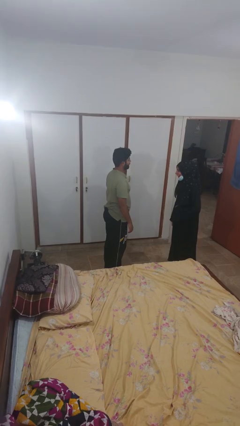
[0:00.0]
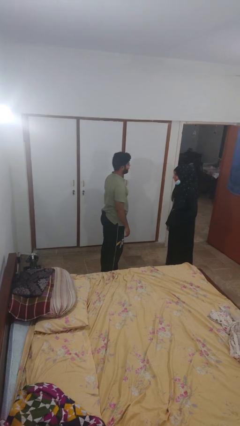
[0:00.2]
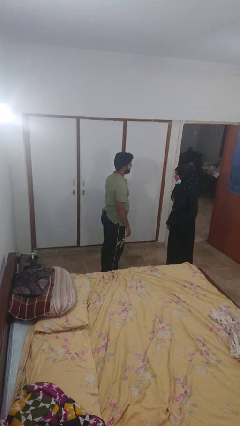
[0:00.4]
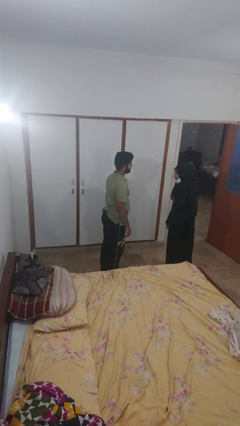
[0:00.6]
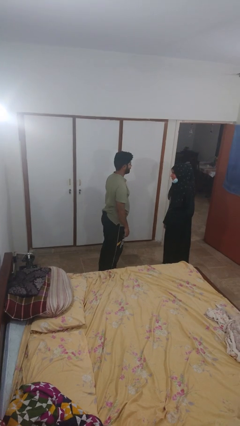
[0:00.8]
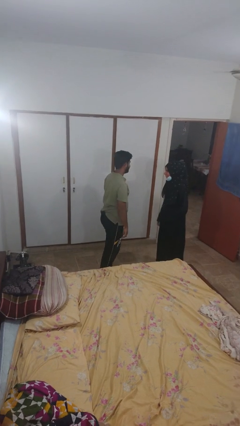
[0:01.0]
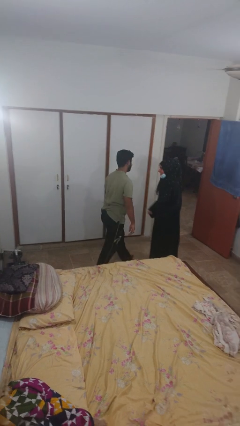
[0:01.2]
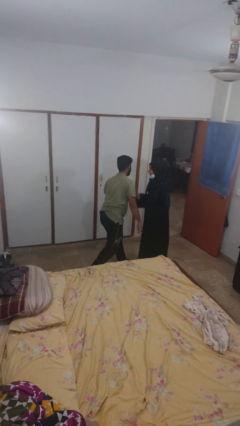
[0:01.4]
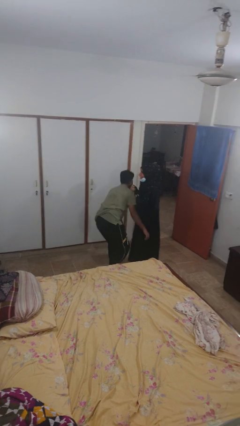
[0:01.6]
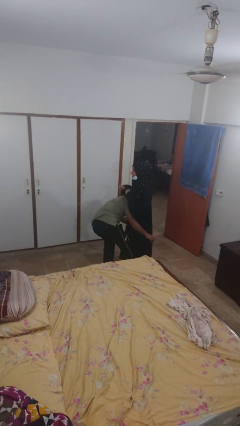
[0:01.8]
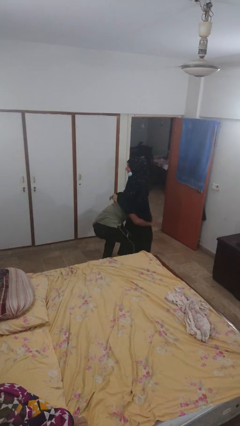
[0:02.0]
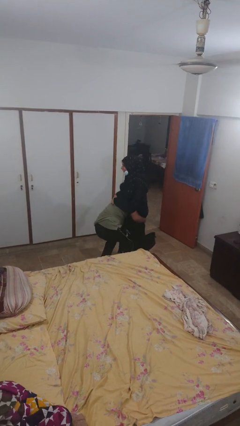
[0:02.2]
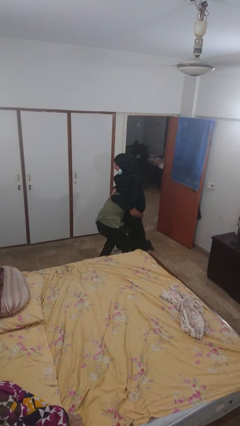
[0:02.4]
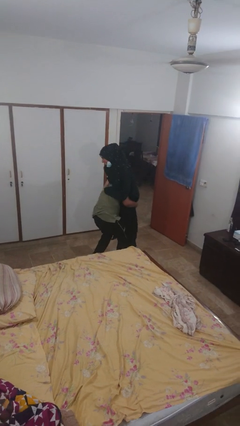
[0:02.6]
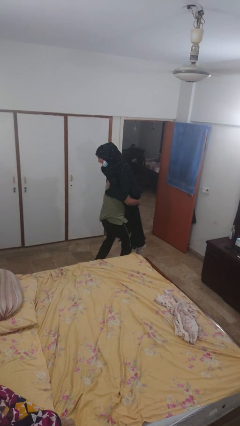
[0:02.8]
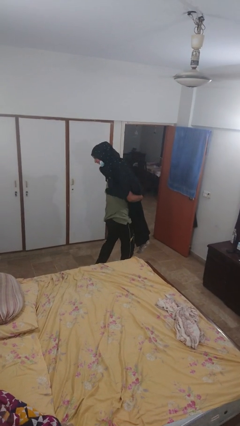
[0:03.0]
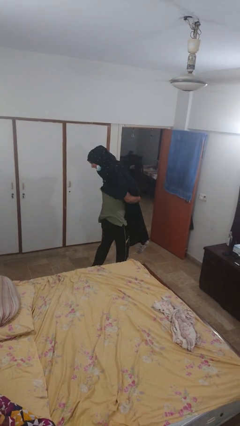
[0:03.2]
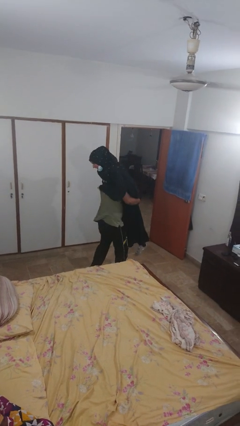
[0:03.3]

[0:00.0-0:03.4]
person carries person over shoulder

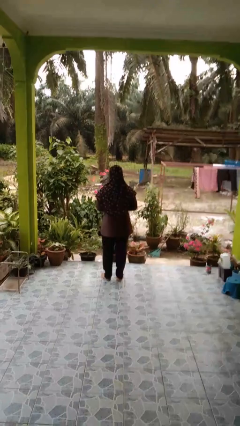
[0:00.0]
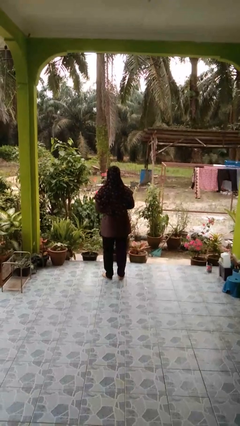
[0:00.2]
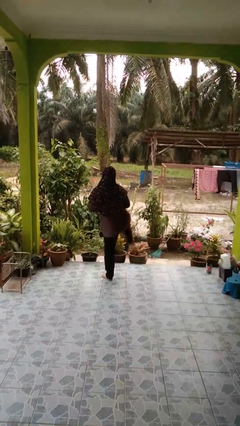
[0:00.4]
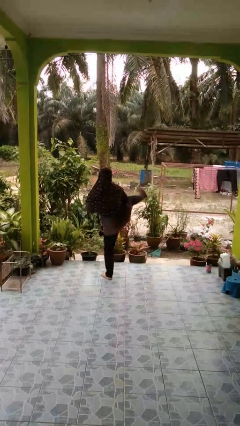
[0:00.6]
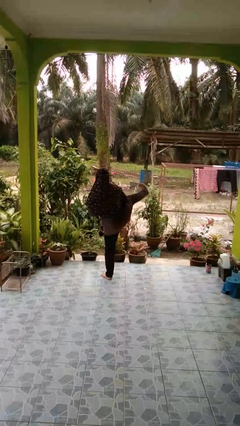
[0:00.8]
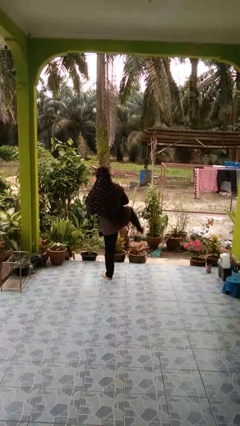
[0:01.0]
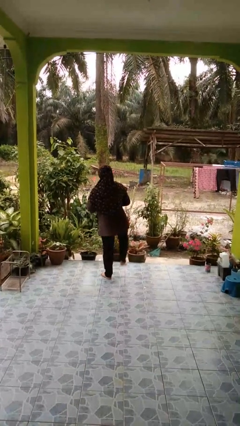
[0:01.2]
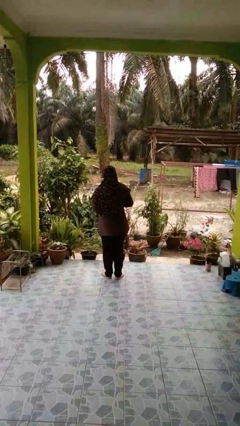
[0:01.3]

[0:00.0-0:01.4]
person karate kicks

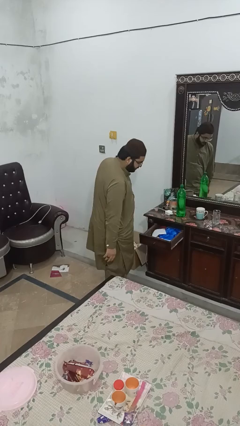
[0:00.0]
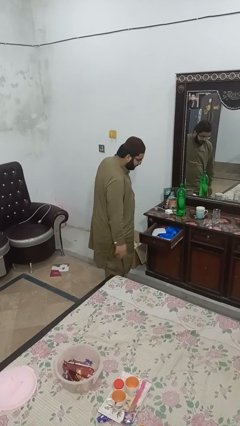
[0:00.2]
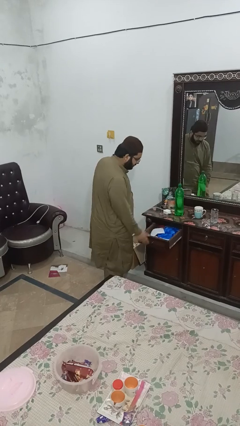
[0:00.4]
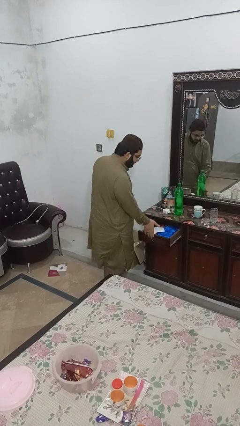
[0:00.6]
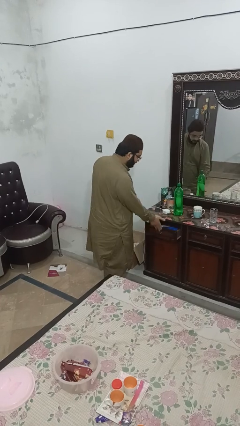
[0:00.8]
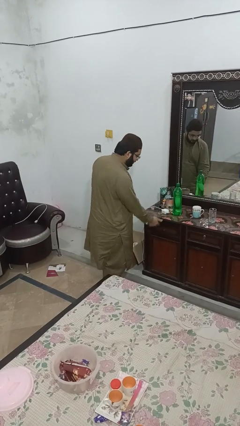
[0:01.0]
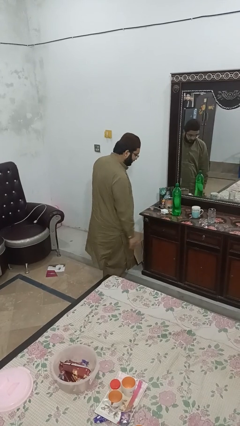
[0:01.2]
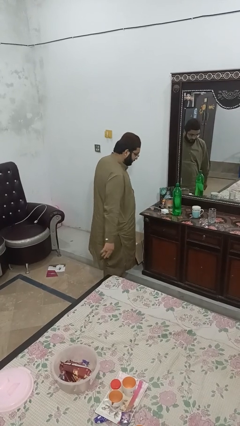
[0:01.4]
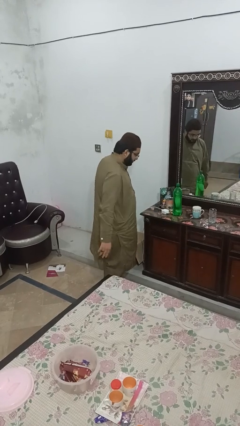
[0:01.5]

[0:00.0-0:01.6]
person closes dresser drawer

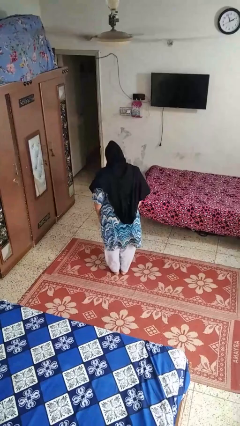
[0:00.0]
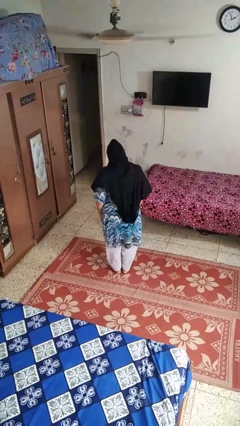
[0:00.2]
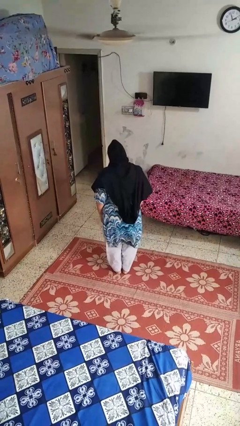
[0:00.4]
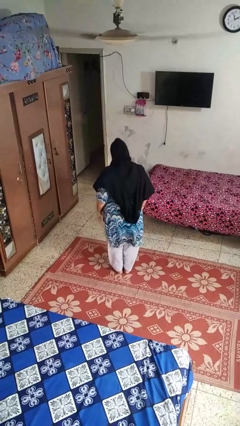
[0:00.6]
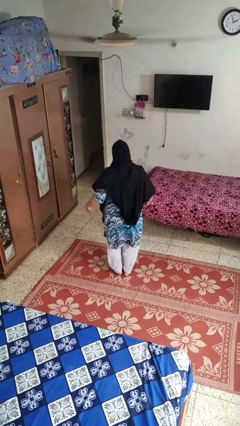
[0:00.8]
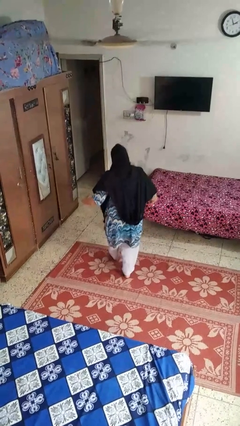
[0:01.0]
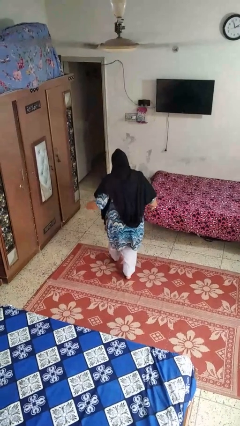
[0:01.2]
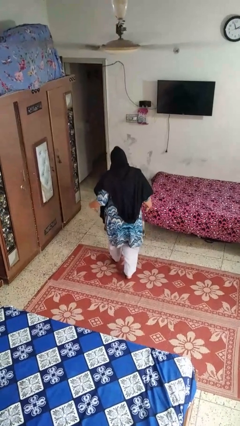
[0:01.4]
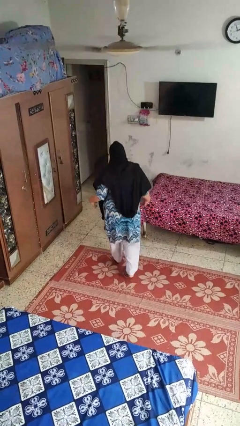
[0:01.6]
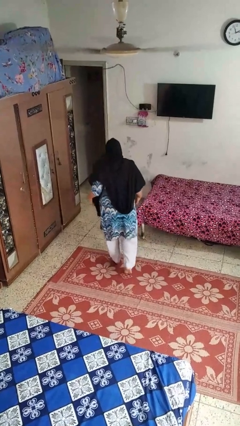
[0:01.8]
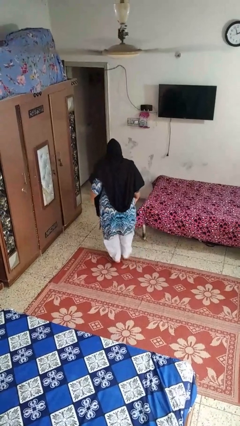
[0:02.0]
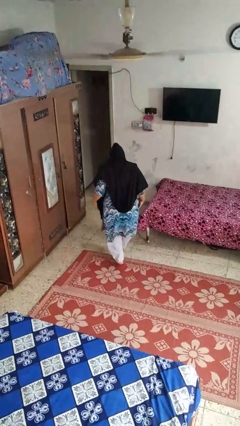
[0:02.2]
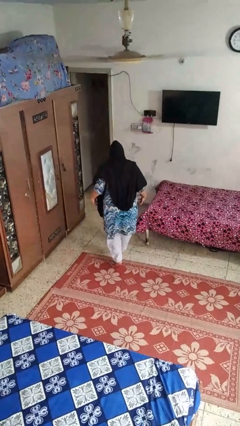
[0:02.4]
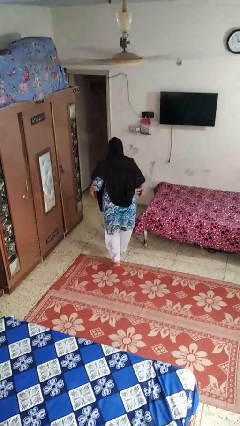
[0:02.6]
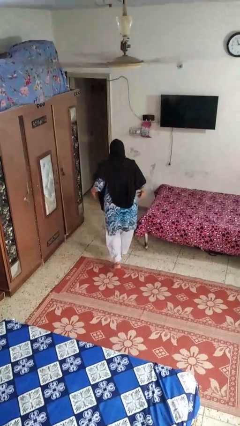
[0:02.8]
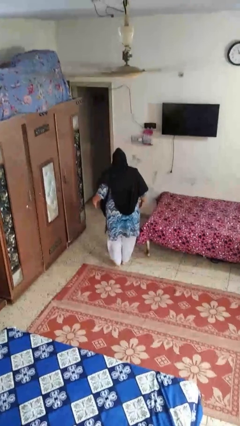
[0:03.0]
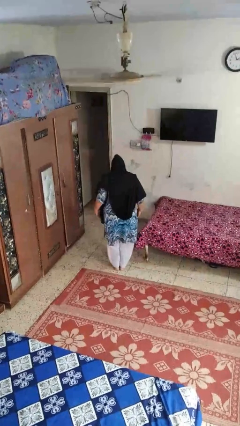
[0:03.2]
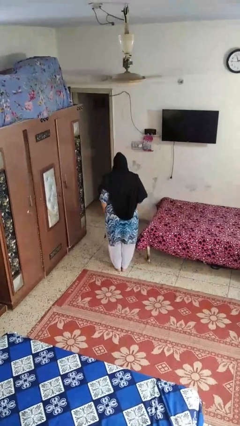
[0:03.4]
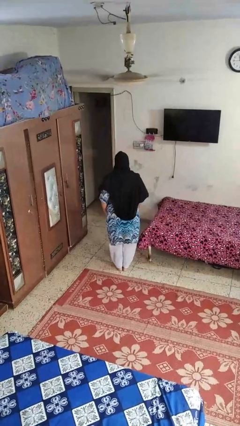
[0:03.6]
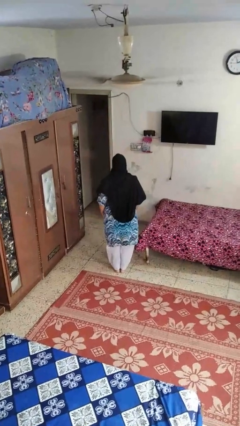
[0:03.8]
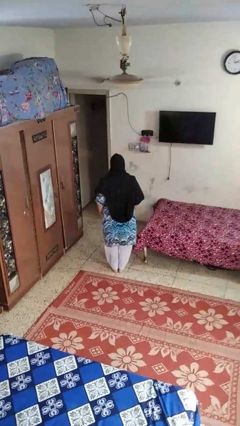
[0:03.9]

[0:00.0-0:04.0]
person walks tiptoe

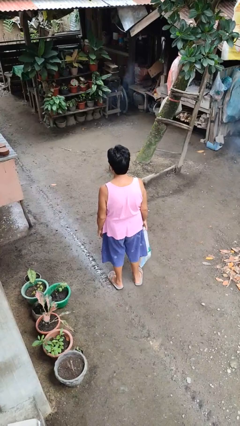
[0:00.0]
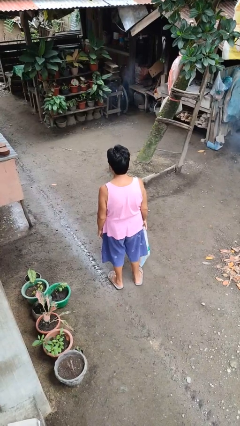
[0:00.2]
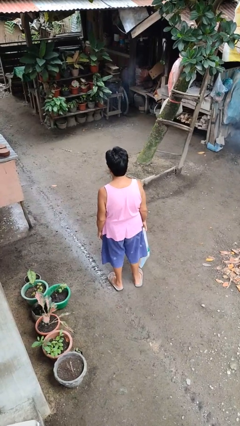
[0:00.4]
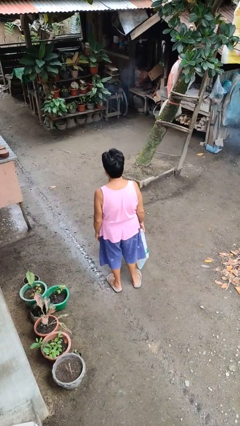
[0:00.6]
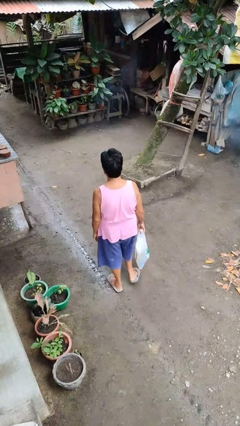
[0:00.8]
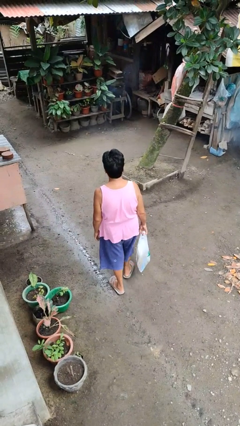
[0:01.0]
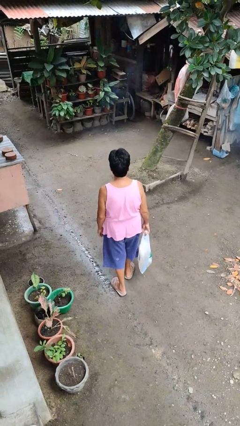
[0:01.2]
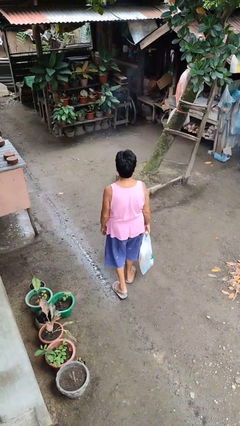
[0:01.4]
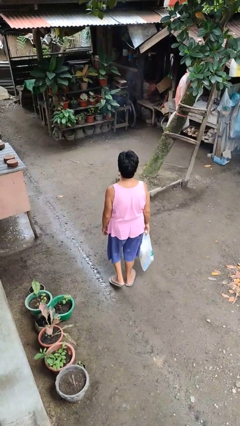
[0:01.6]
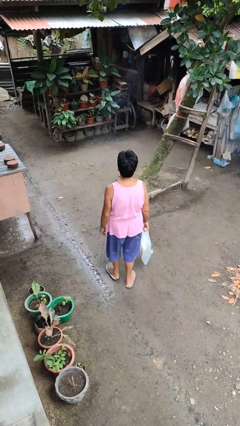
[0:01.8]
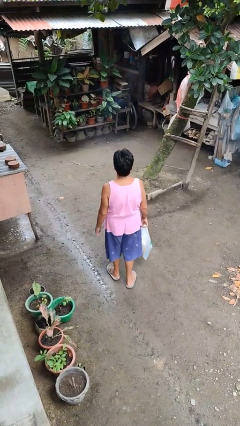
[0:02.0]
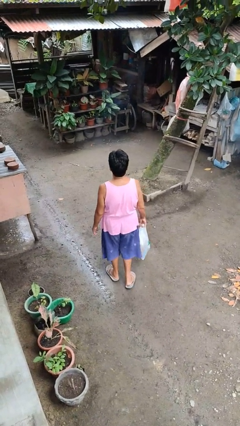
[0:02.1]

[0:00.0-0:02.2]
person carries groceries

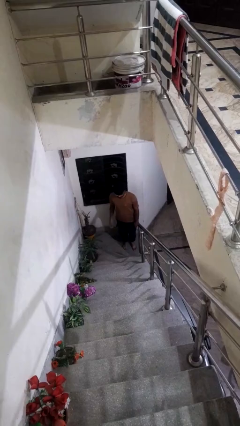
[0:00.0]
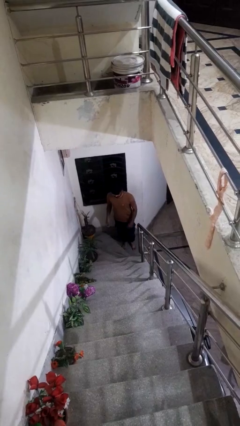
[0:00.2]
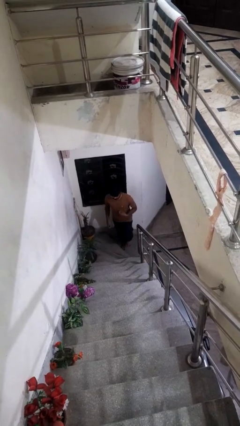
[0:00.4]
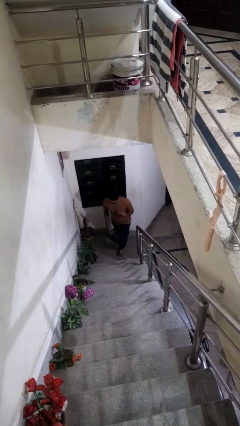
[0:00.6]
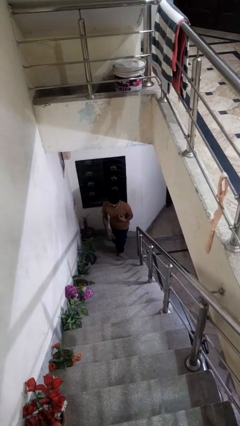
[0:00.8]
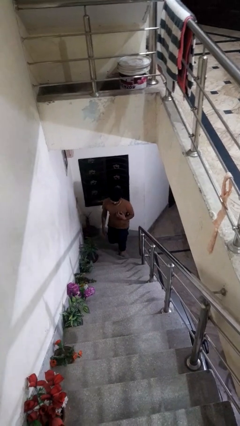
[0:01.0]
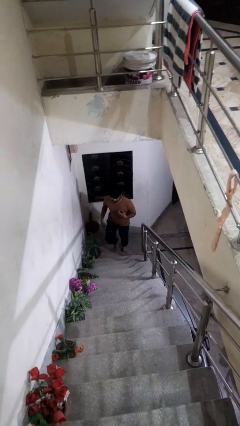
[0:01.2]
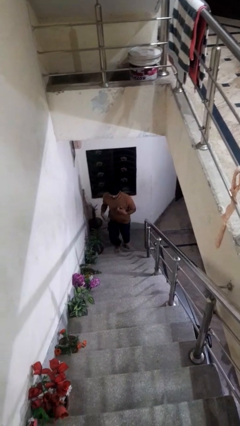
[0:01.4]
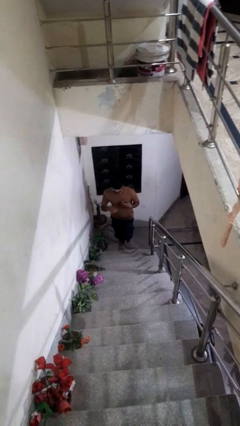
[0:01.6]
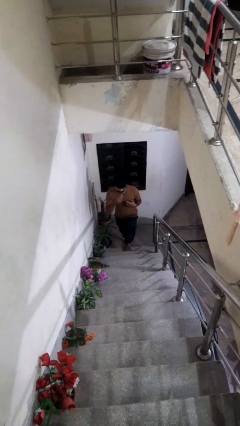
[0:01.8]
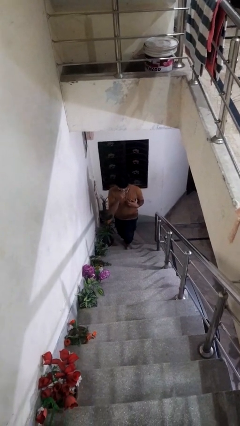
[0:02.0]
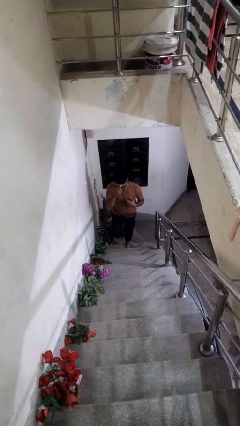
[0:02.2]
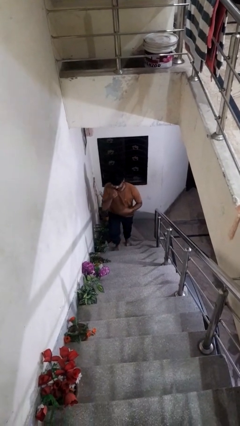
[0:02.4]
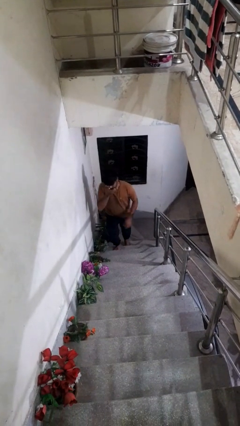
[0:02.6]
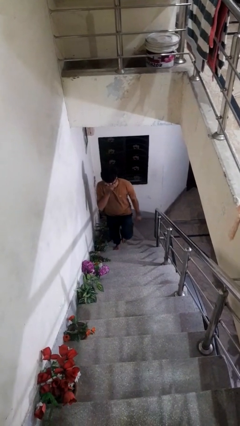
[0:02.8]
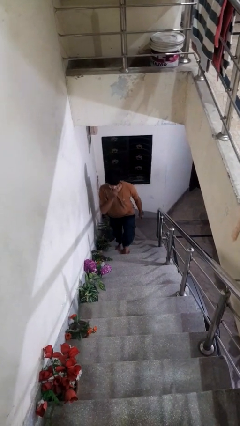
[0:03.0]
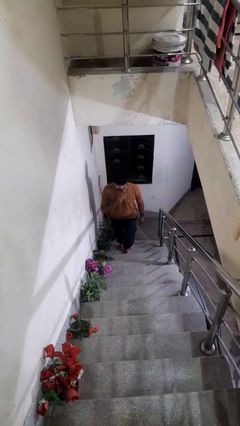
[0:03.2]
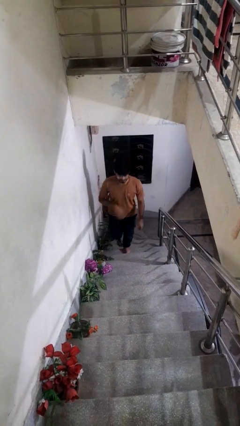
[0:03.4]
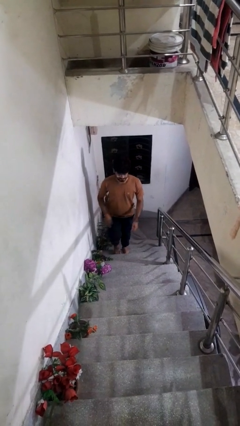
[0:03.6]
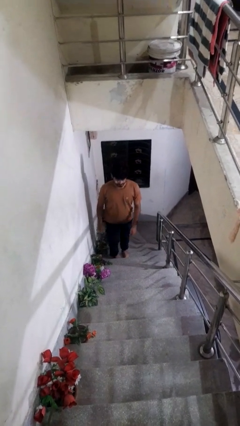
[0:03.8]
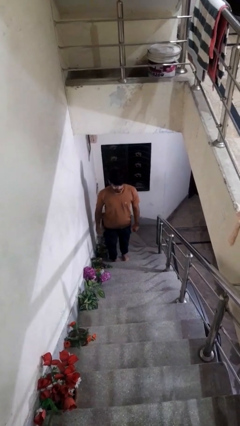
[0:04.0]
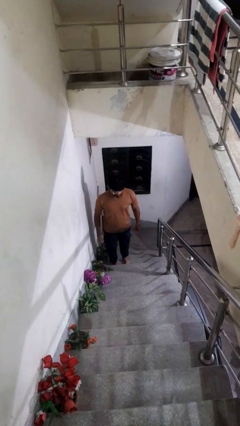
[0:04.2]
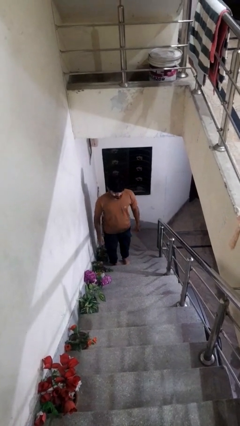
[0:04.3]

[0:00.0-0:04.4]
person climbs up stairs

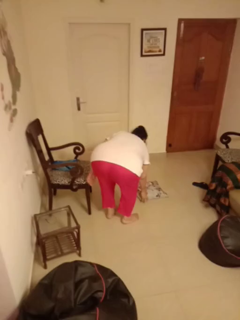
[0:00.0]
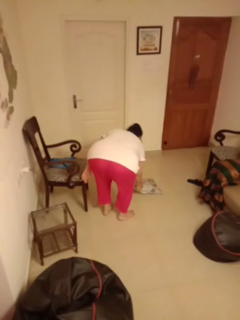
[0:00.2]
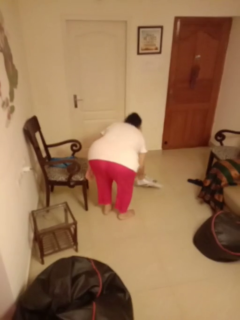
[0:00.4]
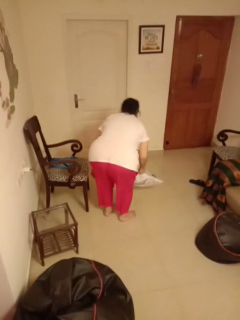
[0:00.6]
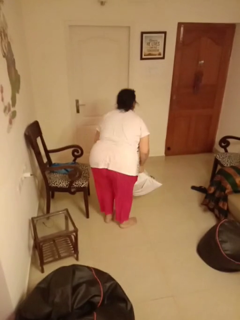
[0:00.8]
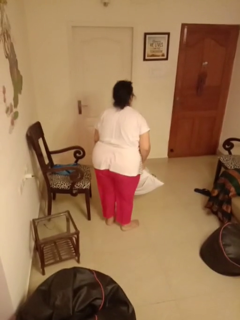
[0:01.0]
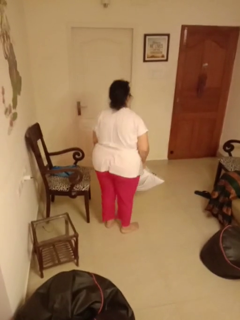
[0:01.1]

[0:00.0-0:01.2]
person picks up object from floor
